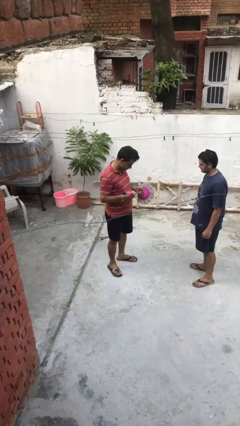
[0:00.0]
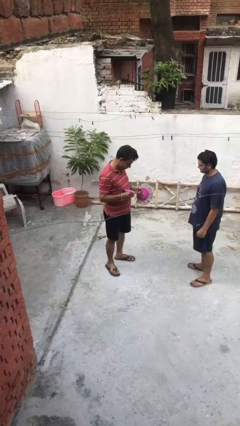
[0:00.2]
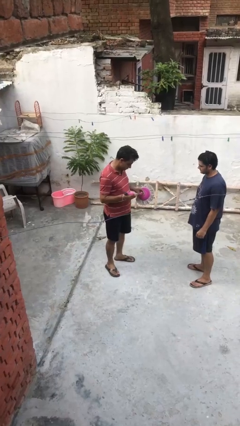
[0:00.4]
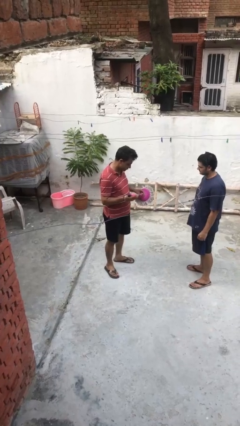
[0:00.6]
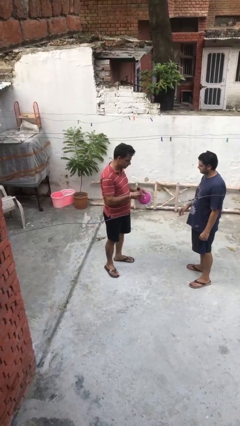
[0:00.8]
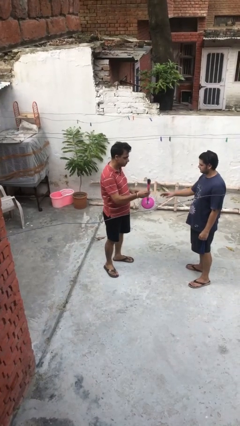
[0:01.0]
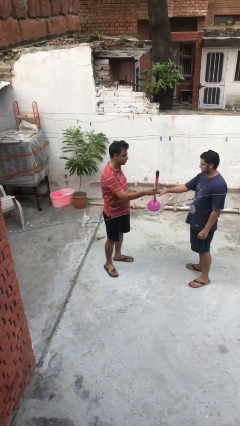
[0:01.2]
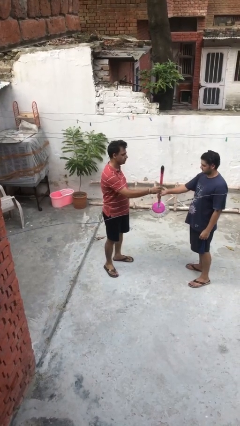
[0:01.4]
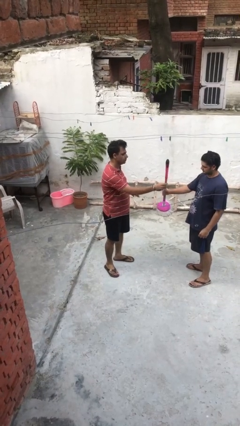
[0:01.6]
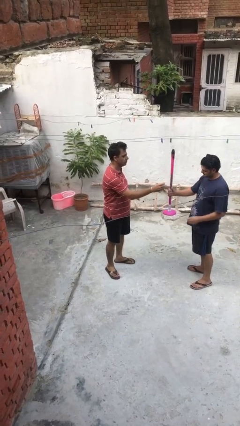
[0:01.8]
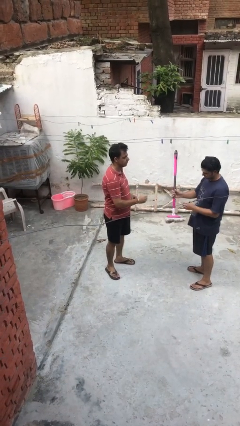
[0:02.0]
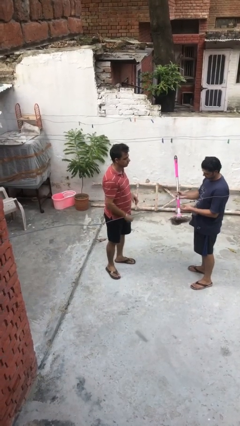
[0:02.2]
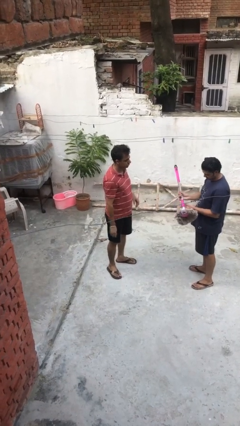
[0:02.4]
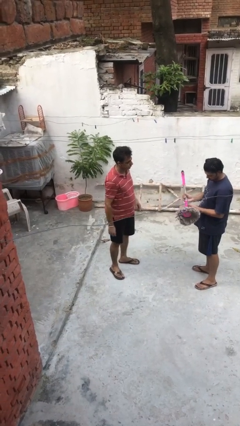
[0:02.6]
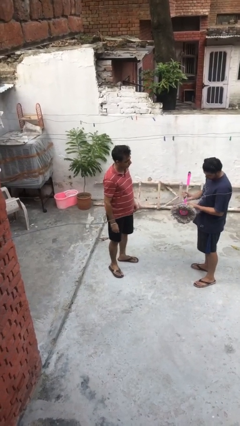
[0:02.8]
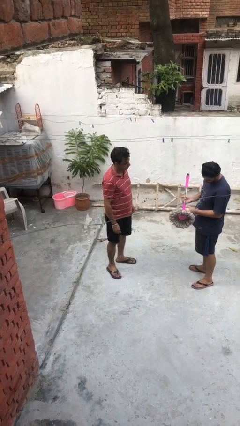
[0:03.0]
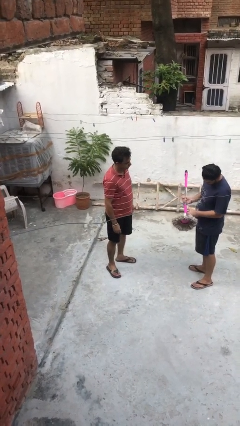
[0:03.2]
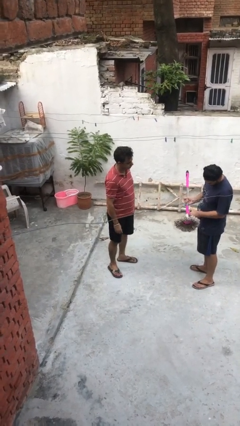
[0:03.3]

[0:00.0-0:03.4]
person transfers object to person

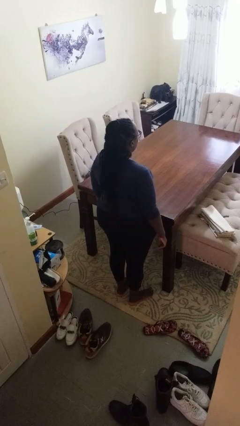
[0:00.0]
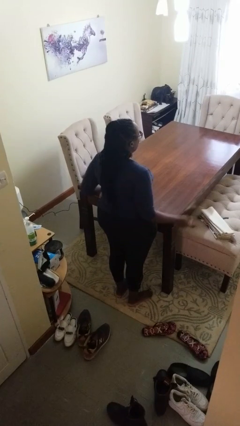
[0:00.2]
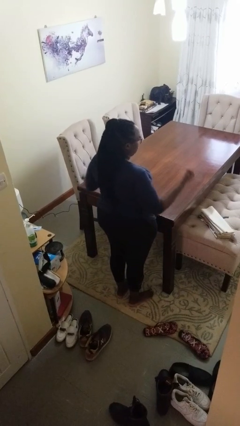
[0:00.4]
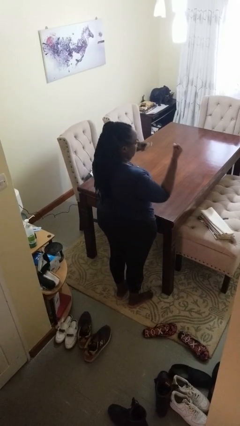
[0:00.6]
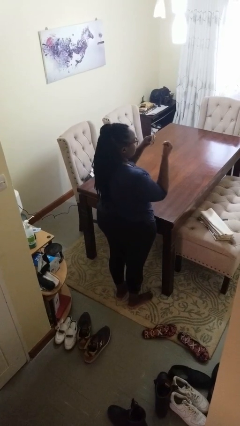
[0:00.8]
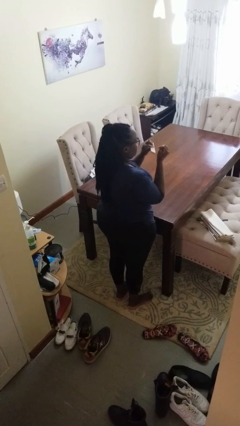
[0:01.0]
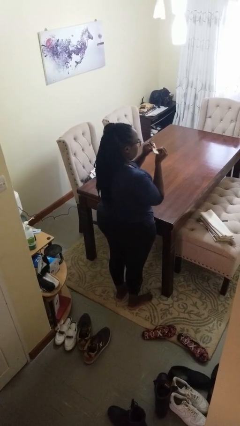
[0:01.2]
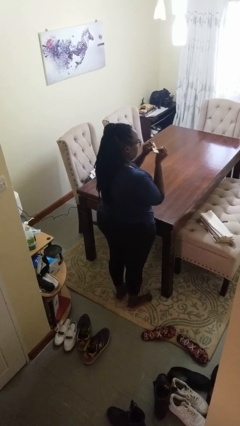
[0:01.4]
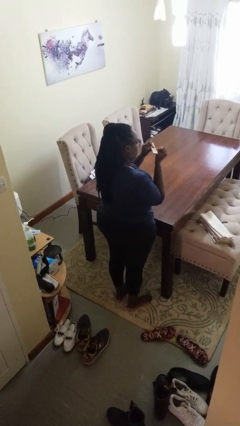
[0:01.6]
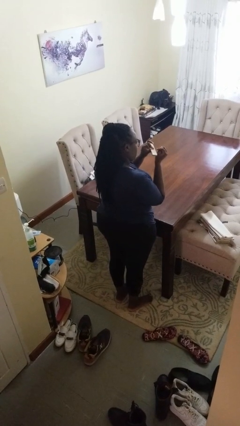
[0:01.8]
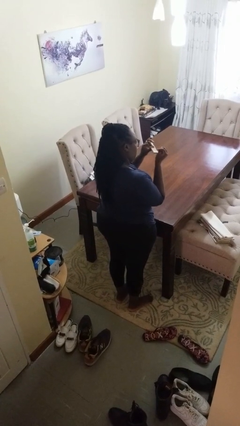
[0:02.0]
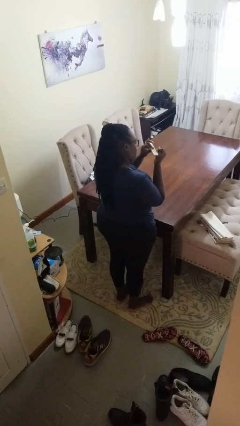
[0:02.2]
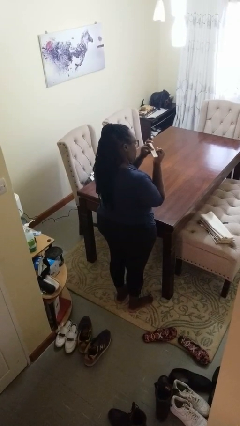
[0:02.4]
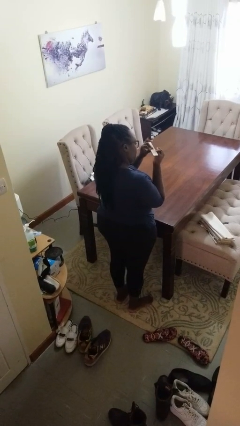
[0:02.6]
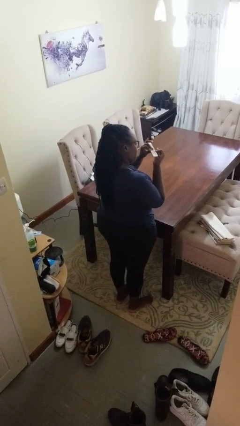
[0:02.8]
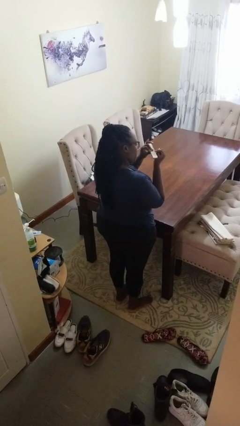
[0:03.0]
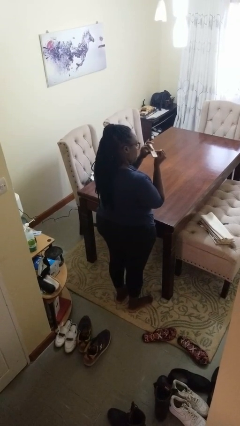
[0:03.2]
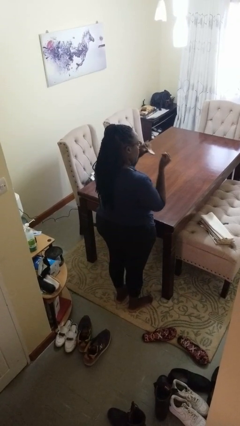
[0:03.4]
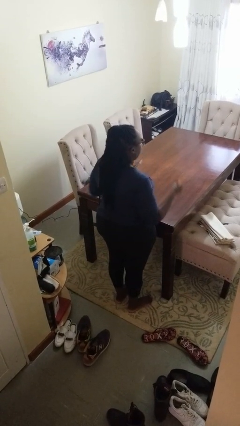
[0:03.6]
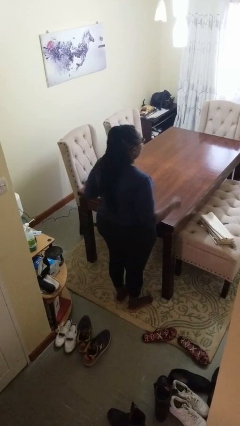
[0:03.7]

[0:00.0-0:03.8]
person files fingernails

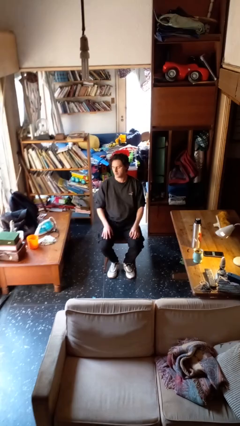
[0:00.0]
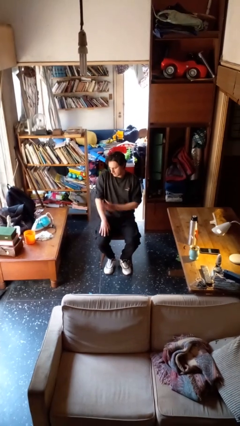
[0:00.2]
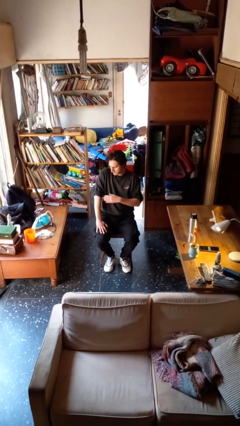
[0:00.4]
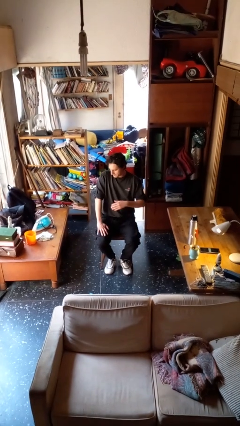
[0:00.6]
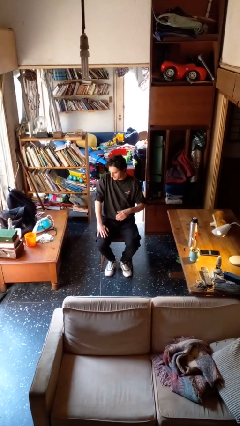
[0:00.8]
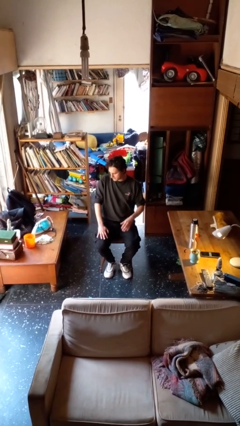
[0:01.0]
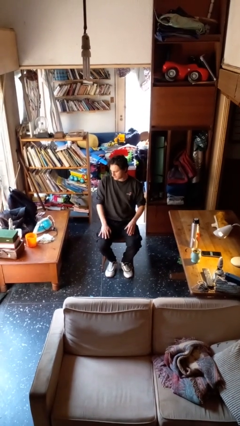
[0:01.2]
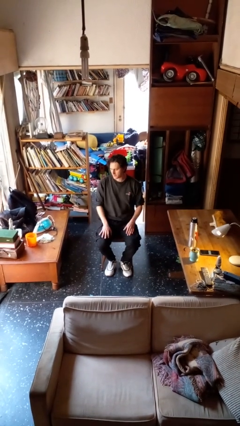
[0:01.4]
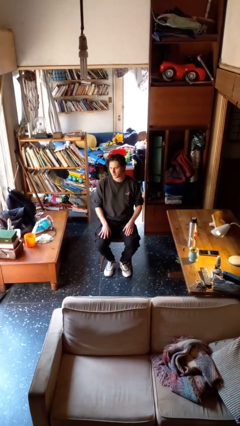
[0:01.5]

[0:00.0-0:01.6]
person swats bug

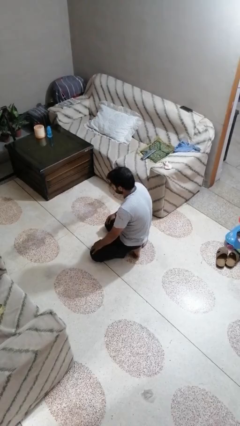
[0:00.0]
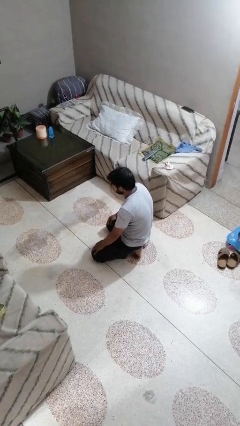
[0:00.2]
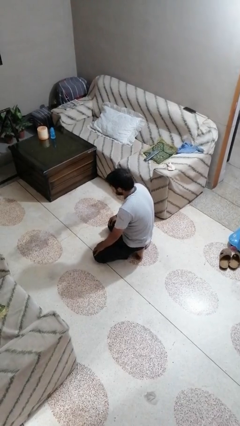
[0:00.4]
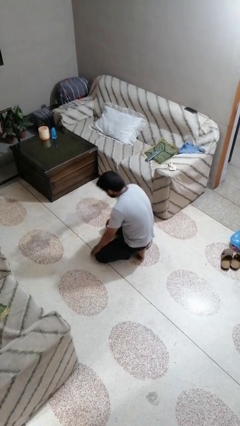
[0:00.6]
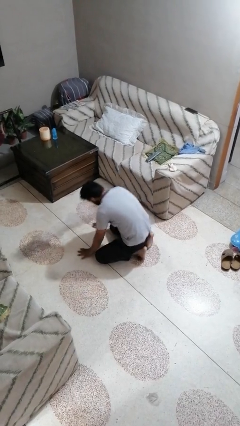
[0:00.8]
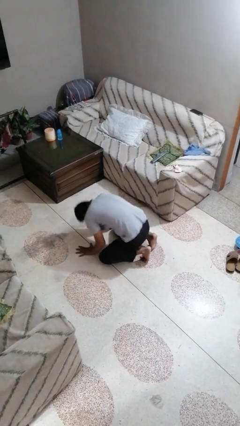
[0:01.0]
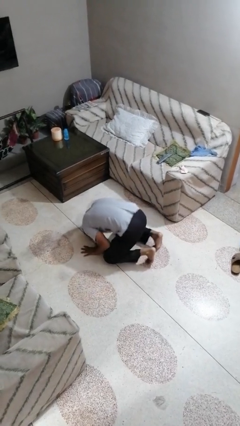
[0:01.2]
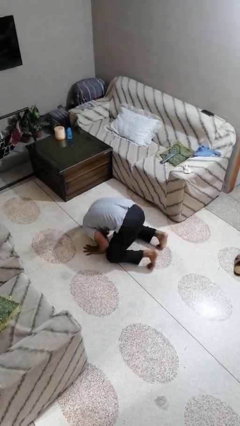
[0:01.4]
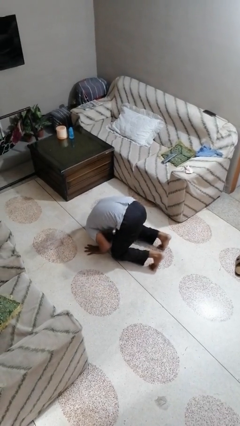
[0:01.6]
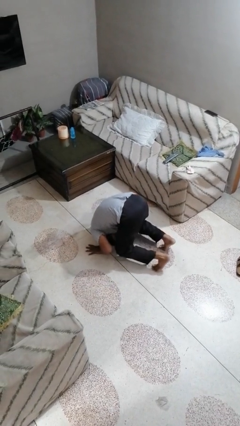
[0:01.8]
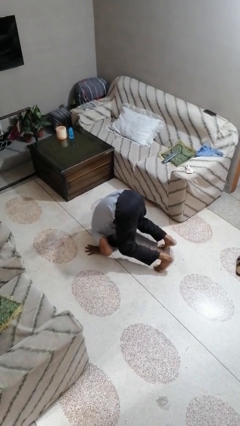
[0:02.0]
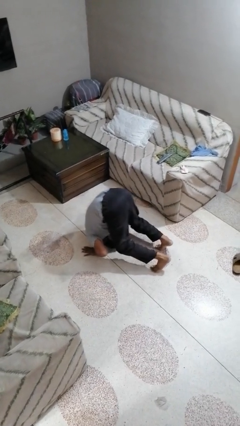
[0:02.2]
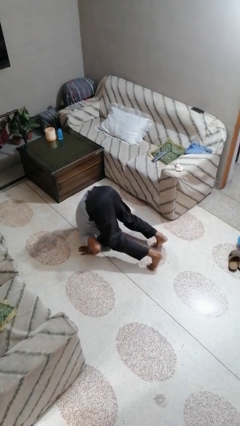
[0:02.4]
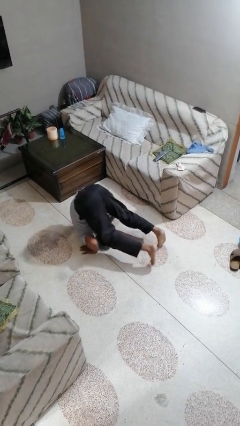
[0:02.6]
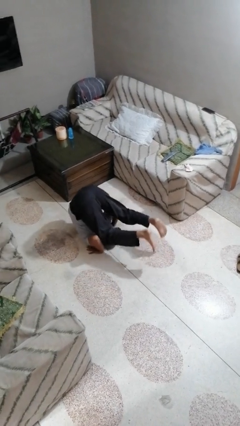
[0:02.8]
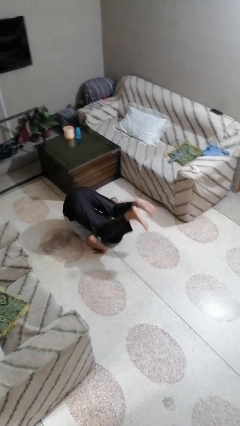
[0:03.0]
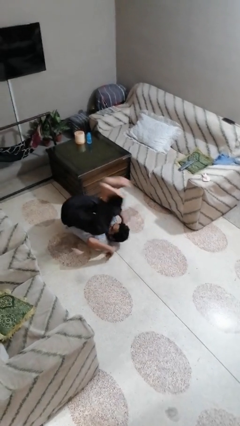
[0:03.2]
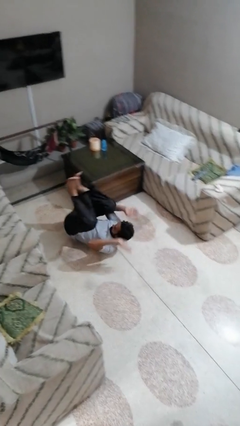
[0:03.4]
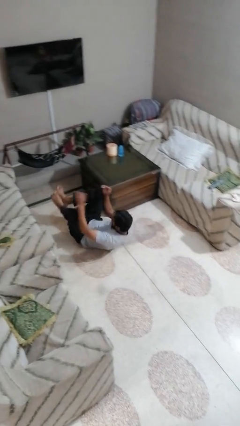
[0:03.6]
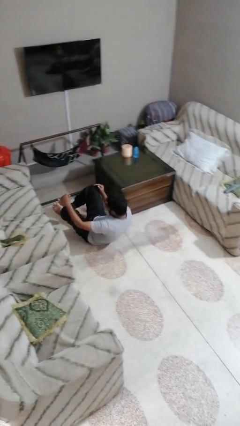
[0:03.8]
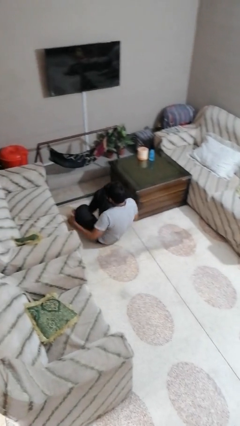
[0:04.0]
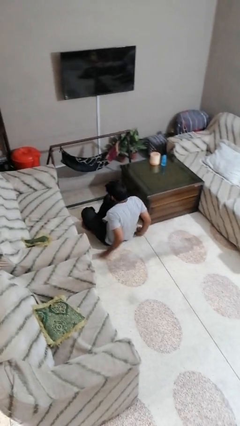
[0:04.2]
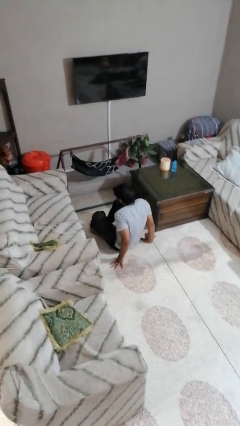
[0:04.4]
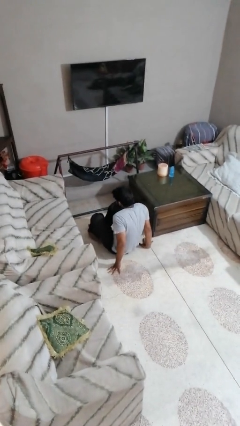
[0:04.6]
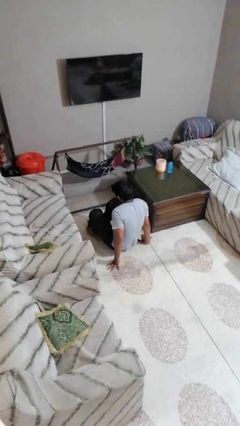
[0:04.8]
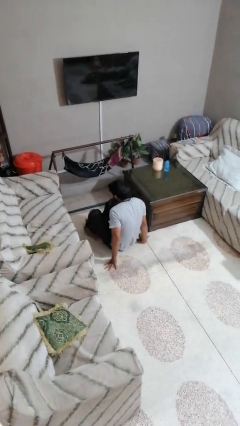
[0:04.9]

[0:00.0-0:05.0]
person somersaults

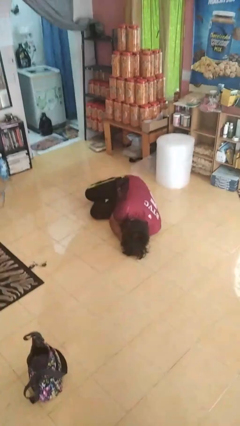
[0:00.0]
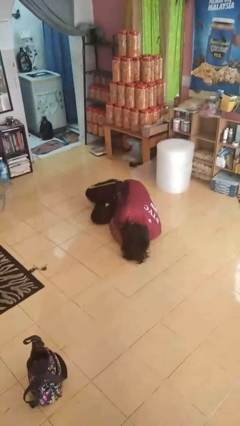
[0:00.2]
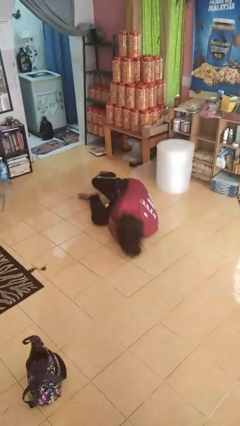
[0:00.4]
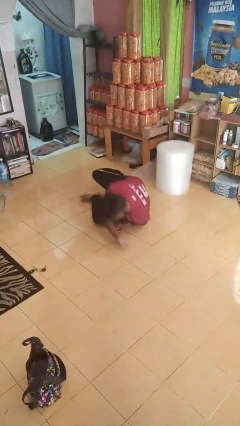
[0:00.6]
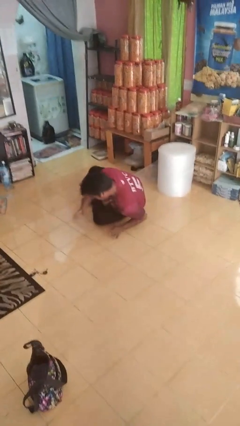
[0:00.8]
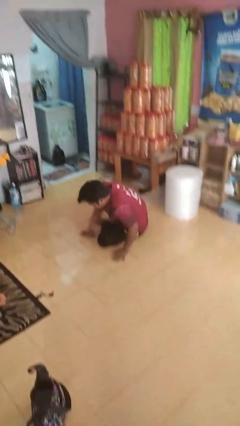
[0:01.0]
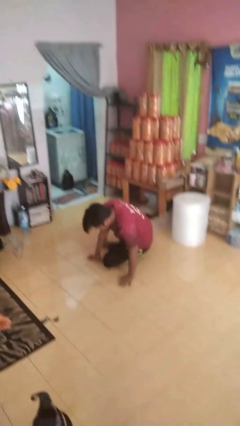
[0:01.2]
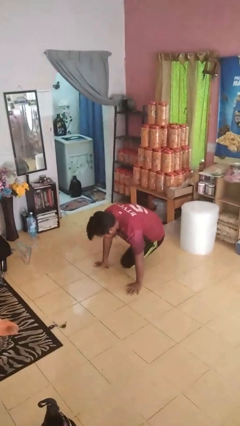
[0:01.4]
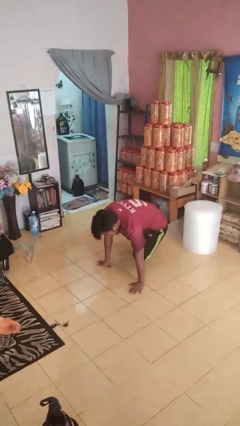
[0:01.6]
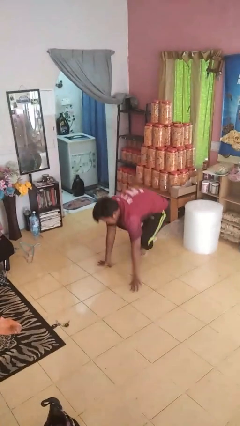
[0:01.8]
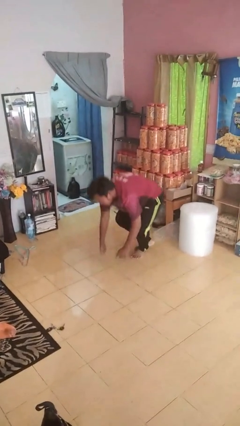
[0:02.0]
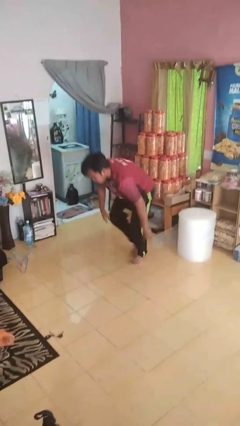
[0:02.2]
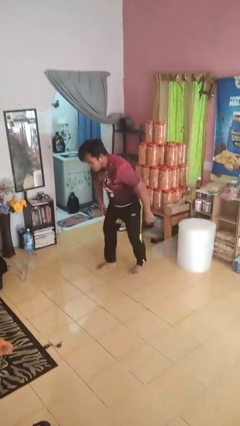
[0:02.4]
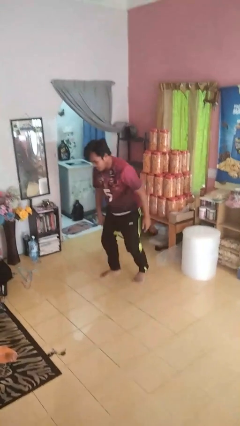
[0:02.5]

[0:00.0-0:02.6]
person stands up from floor

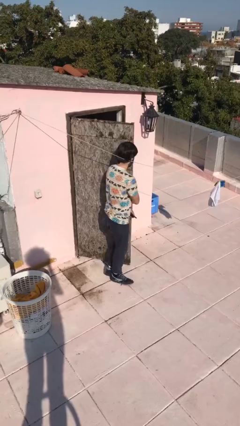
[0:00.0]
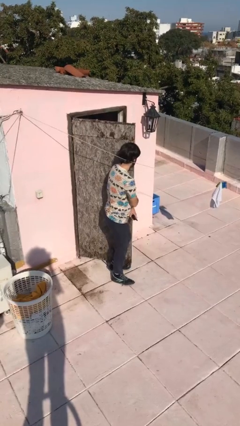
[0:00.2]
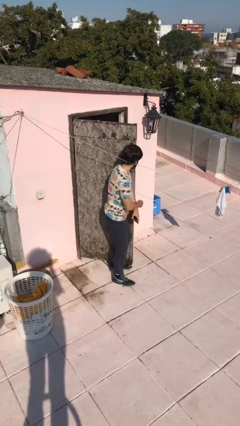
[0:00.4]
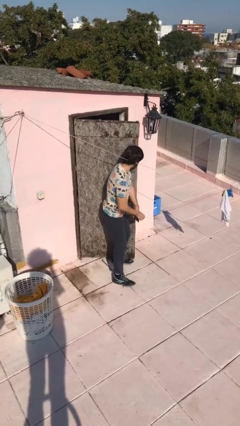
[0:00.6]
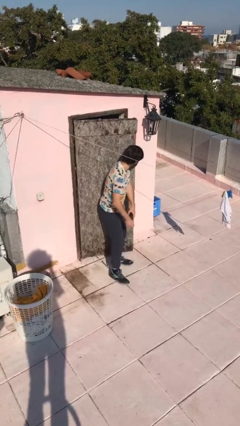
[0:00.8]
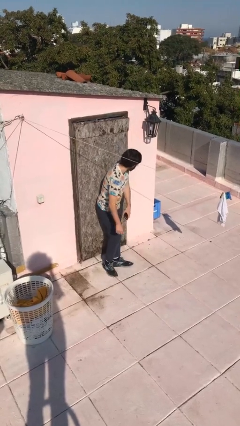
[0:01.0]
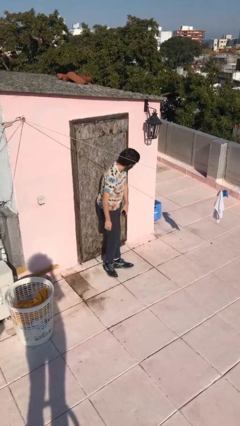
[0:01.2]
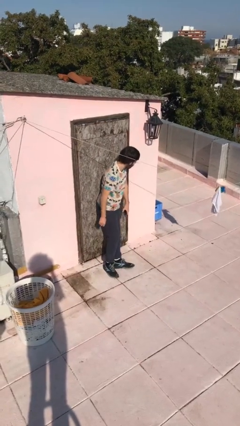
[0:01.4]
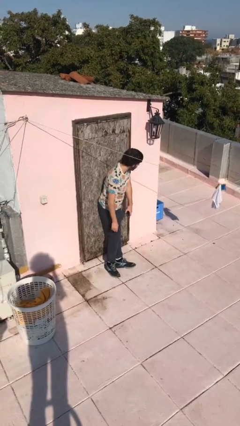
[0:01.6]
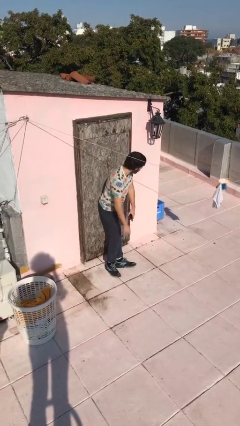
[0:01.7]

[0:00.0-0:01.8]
person closes door with hip
